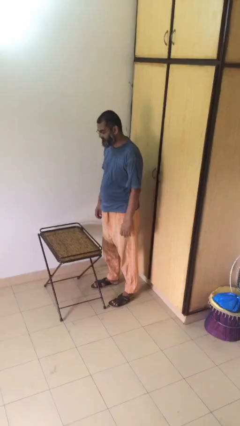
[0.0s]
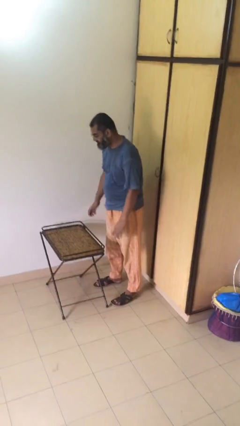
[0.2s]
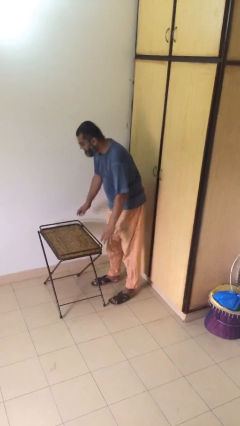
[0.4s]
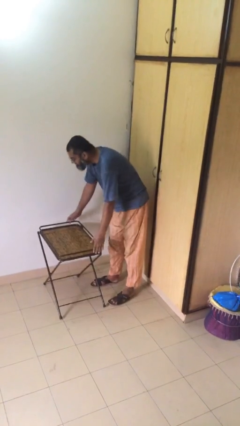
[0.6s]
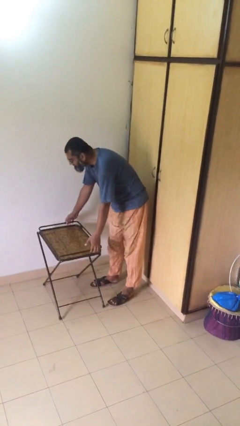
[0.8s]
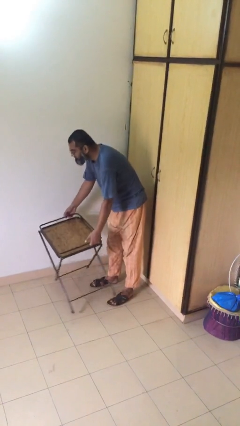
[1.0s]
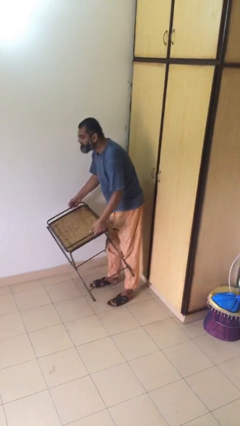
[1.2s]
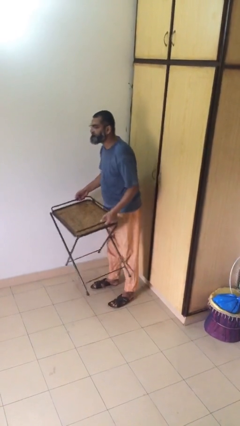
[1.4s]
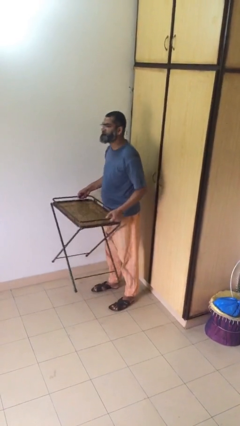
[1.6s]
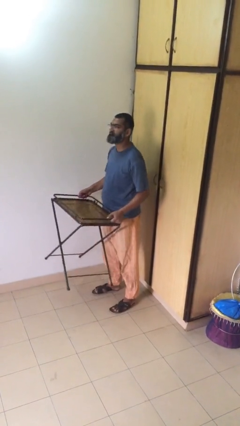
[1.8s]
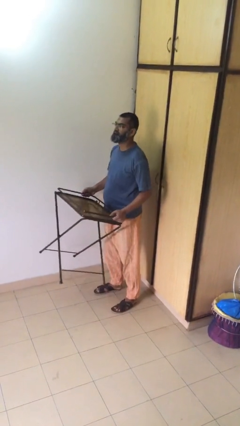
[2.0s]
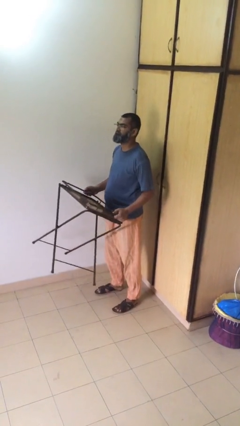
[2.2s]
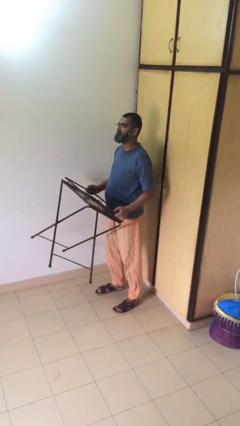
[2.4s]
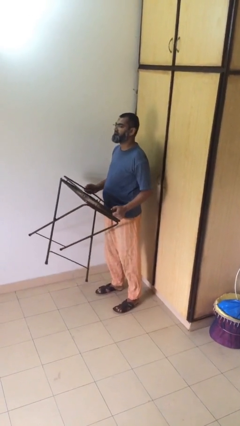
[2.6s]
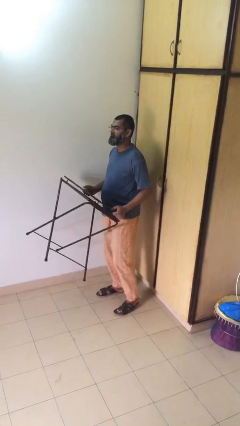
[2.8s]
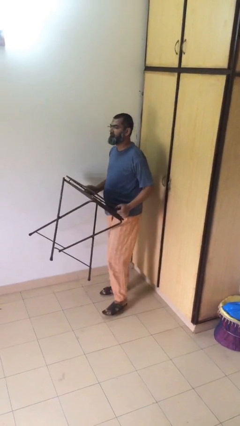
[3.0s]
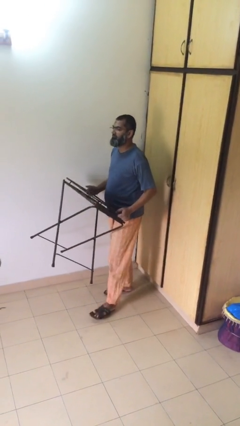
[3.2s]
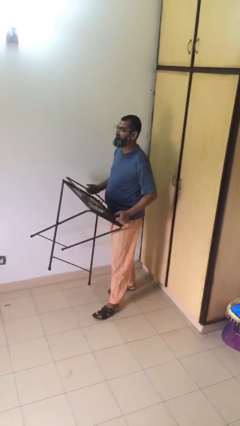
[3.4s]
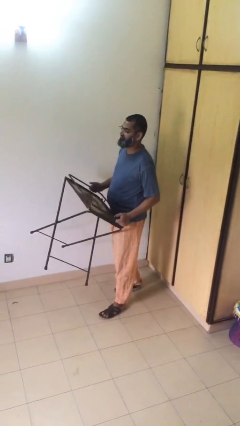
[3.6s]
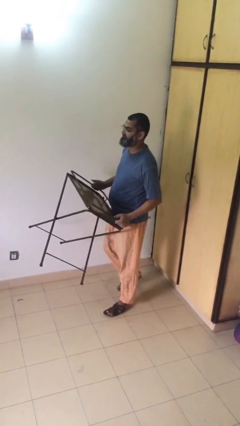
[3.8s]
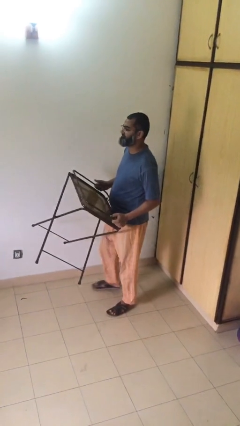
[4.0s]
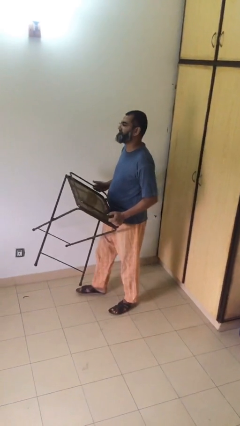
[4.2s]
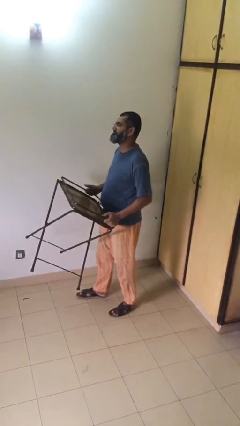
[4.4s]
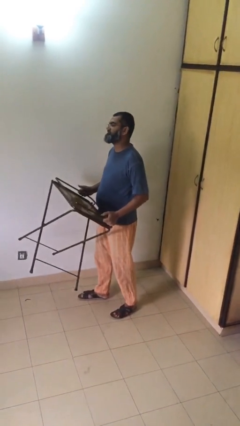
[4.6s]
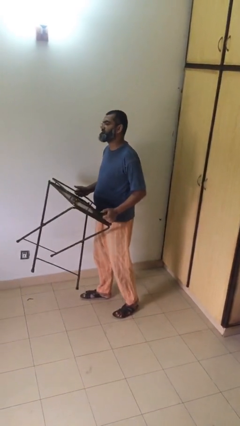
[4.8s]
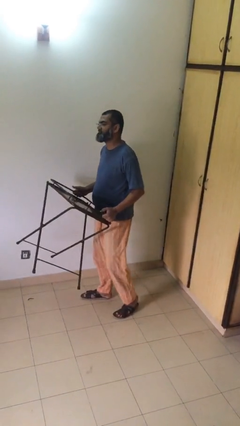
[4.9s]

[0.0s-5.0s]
person carries heavy object

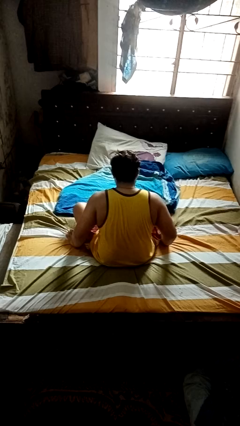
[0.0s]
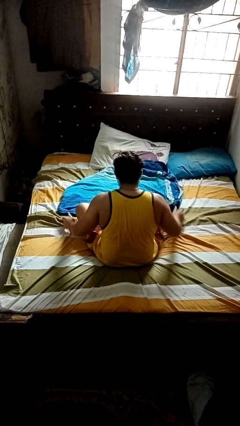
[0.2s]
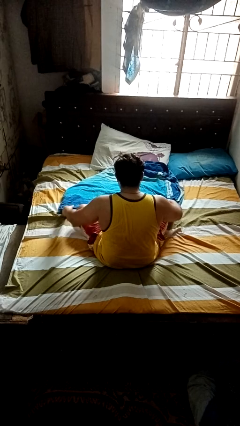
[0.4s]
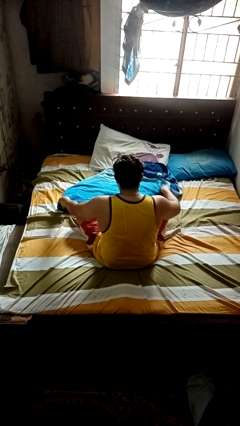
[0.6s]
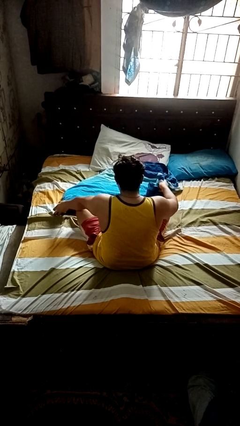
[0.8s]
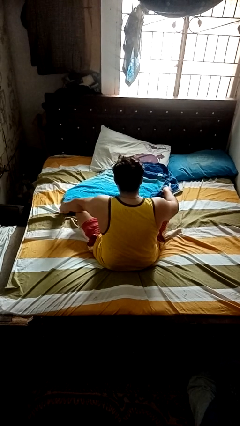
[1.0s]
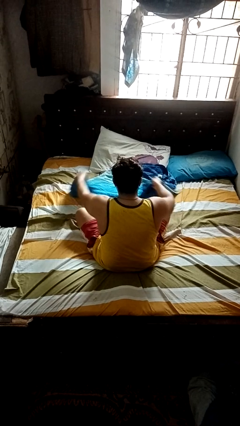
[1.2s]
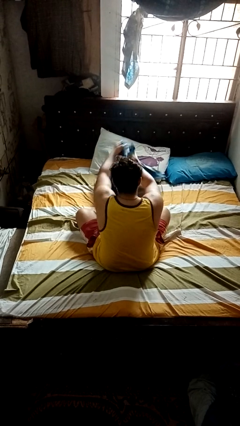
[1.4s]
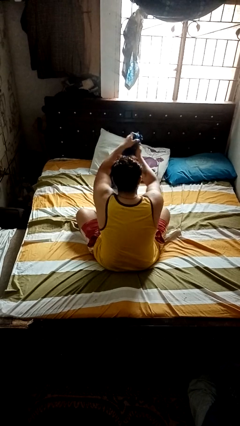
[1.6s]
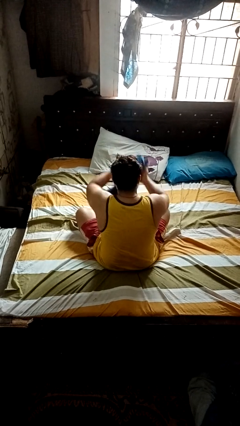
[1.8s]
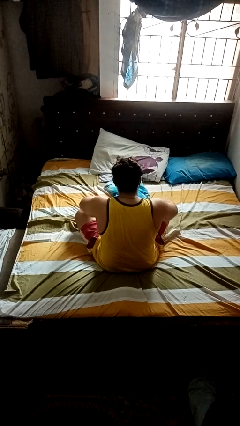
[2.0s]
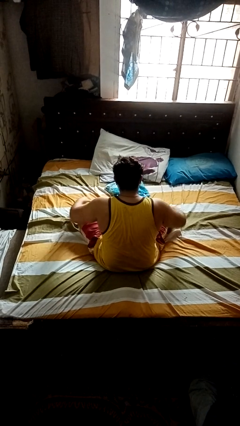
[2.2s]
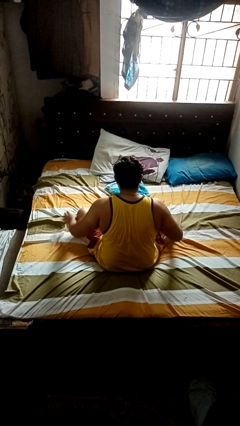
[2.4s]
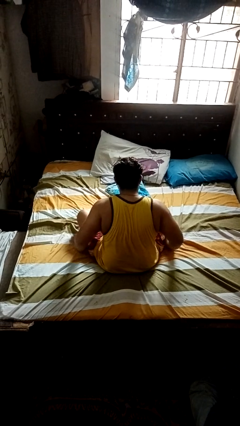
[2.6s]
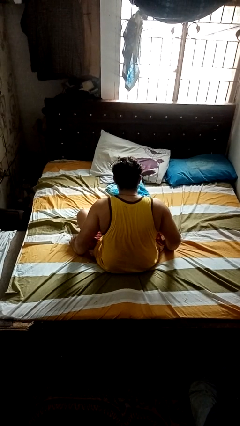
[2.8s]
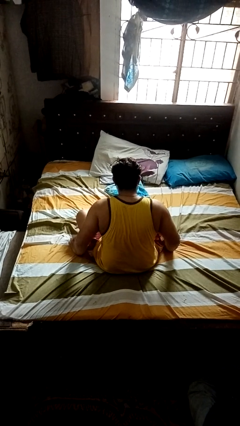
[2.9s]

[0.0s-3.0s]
person folds blanket

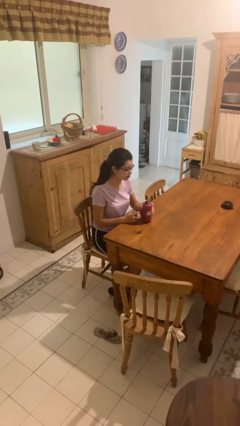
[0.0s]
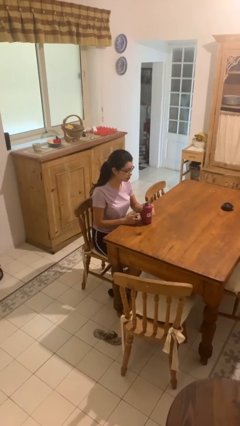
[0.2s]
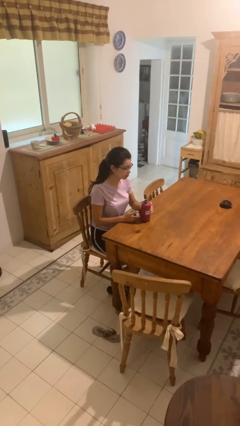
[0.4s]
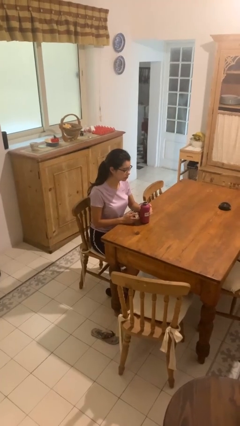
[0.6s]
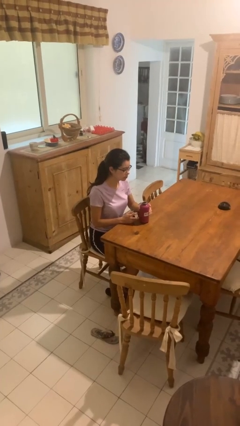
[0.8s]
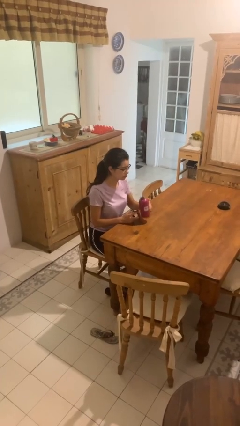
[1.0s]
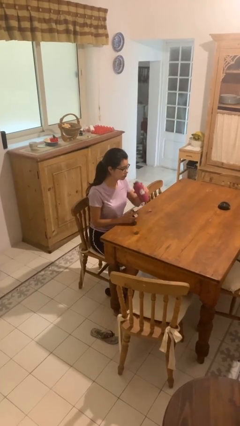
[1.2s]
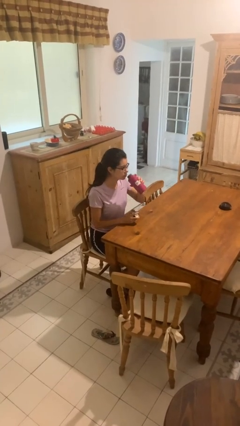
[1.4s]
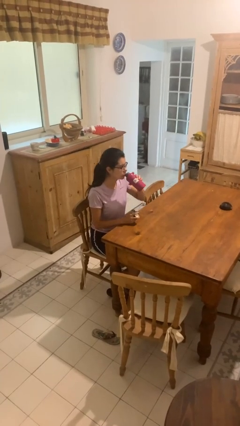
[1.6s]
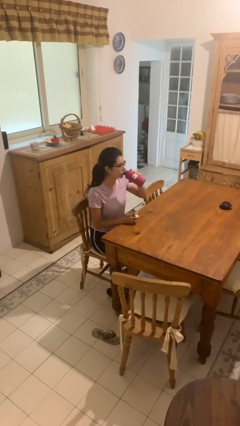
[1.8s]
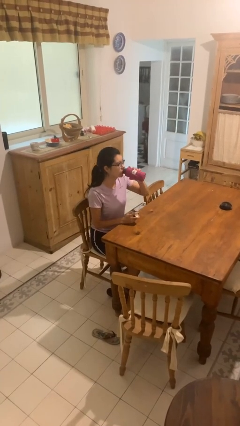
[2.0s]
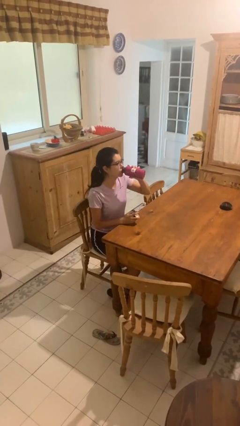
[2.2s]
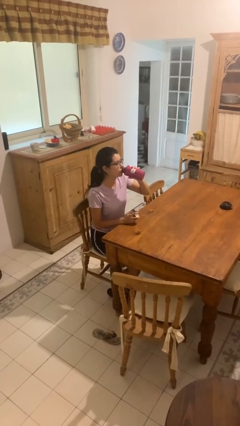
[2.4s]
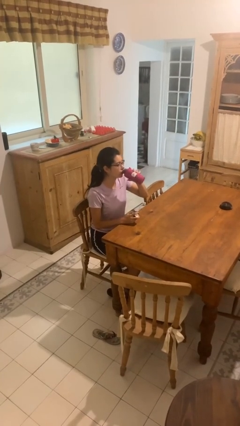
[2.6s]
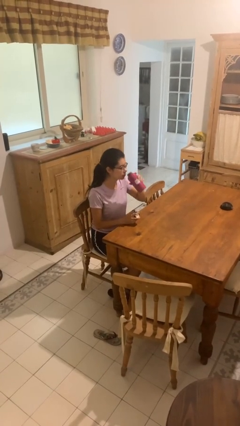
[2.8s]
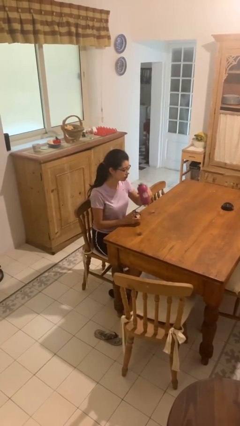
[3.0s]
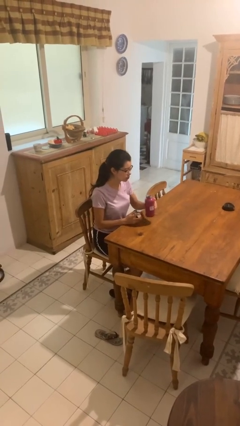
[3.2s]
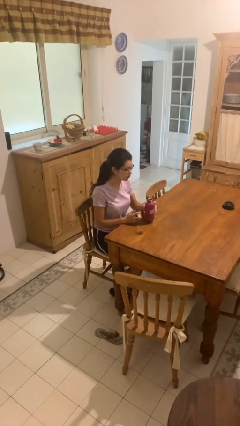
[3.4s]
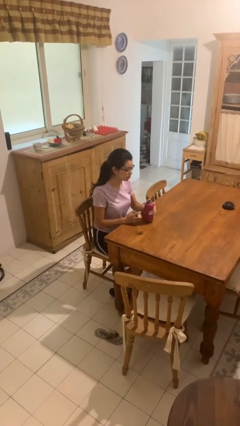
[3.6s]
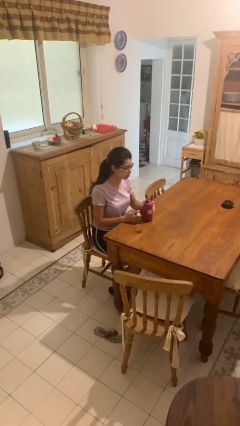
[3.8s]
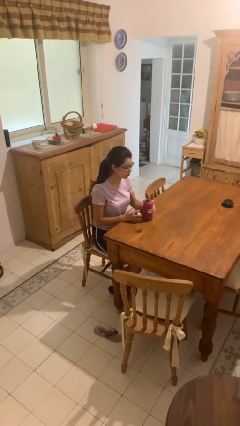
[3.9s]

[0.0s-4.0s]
person drinks from bottle

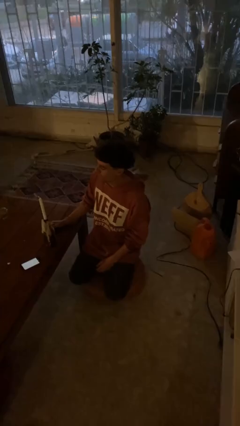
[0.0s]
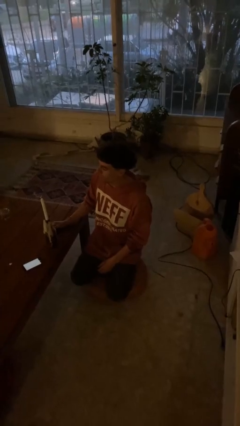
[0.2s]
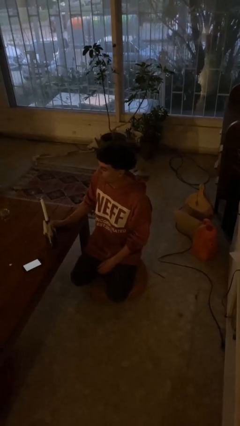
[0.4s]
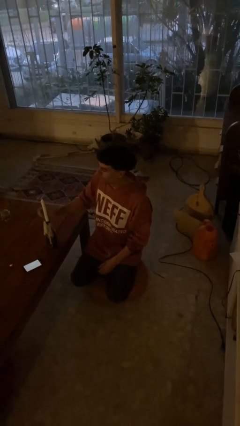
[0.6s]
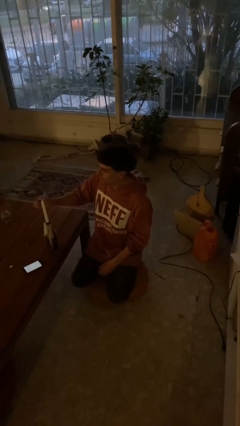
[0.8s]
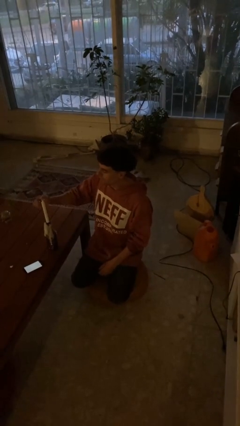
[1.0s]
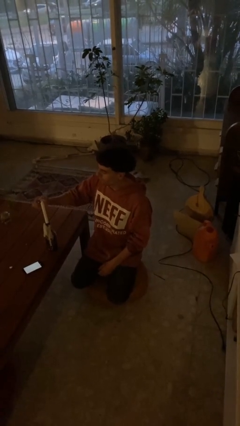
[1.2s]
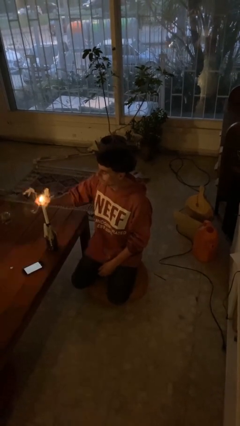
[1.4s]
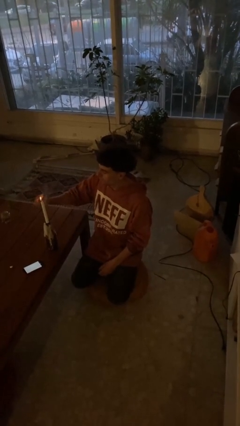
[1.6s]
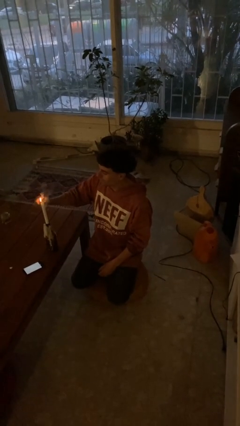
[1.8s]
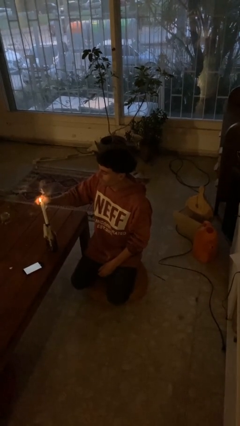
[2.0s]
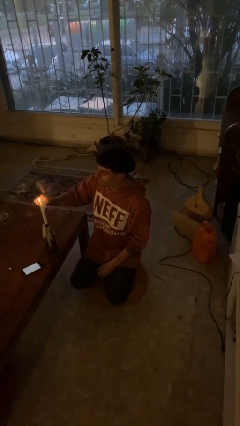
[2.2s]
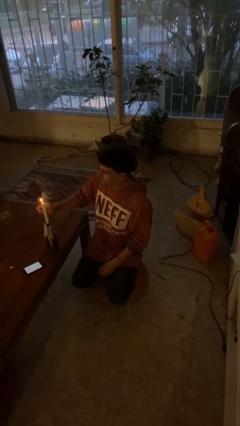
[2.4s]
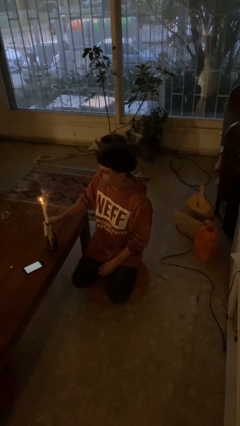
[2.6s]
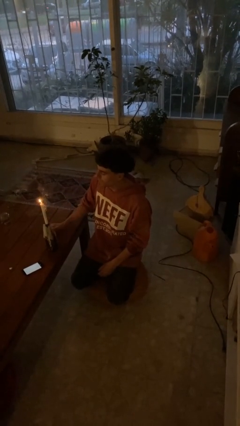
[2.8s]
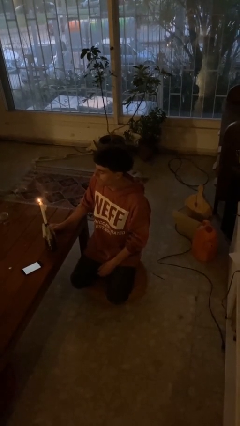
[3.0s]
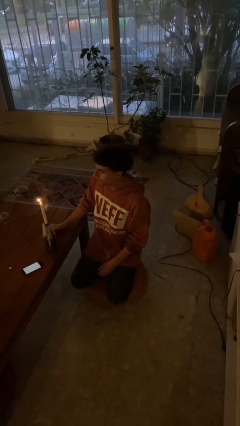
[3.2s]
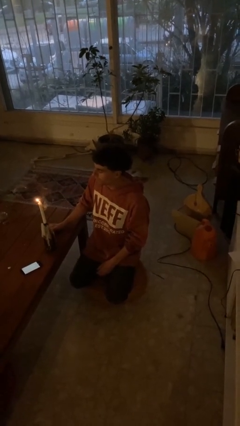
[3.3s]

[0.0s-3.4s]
person lights candle

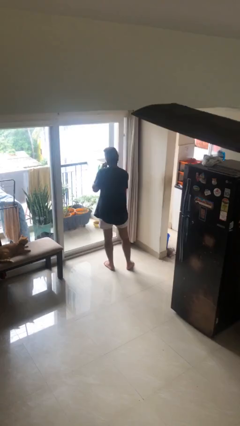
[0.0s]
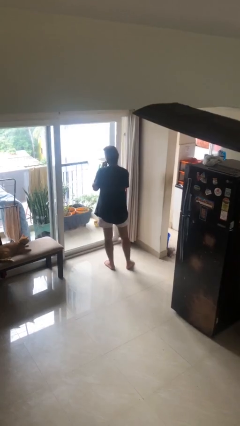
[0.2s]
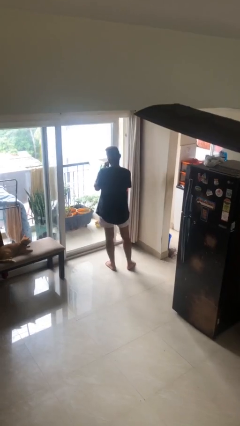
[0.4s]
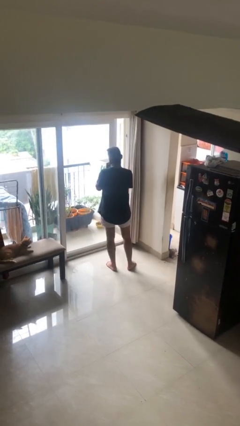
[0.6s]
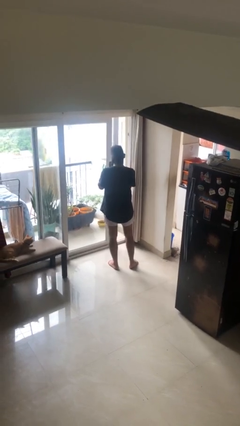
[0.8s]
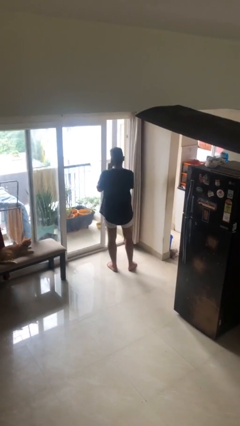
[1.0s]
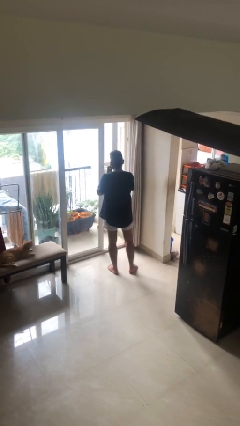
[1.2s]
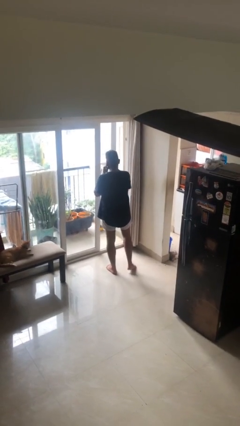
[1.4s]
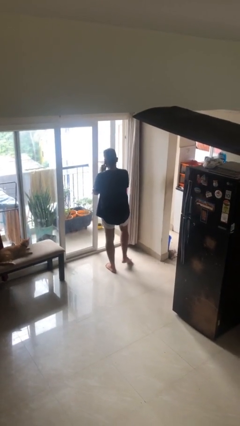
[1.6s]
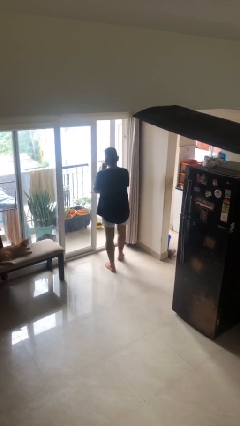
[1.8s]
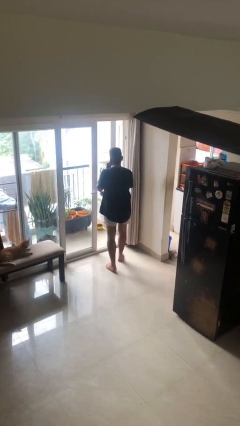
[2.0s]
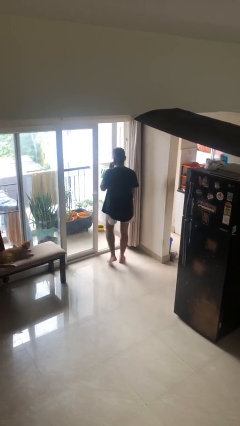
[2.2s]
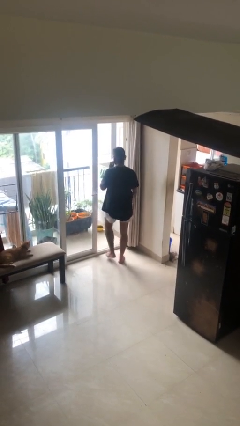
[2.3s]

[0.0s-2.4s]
person opens facility door
